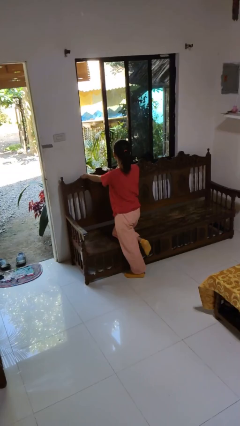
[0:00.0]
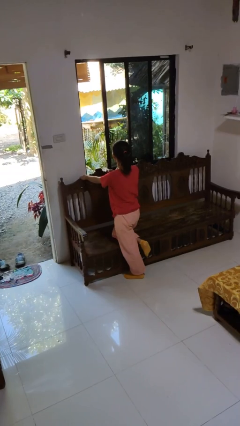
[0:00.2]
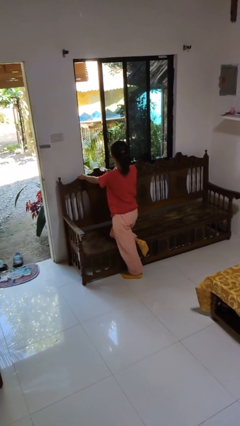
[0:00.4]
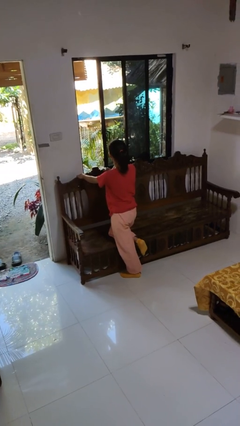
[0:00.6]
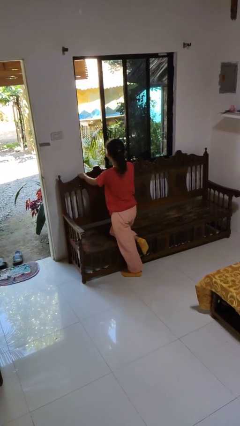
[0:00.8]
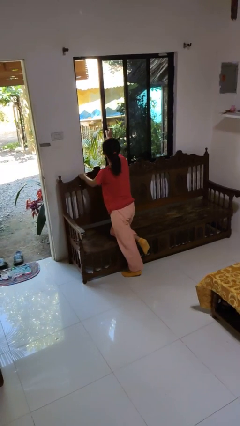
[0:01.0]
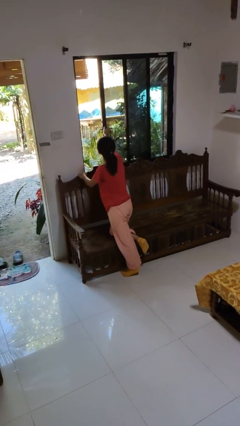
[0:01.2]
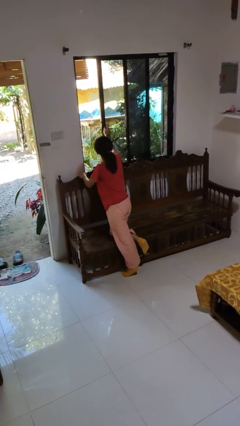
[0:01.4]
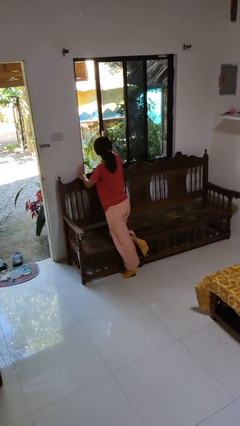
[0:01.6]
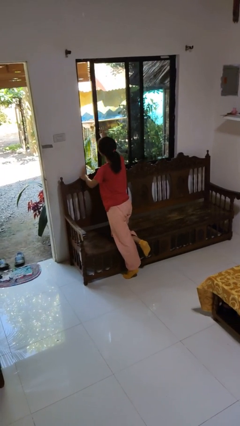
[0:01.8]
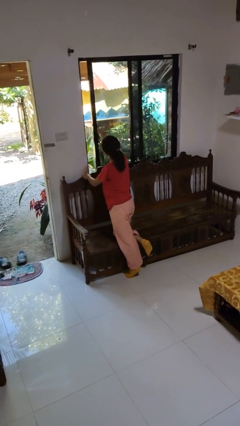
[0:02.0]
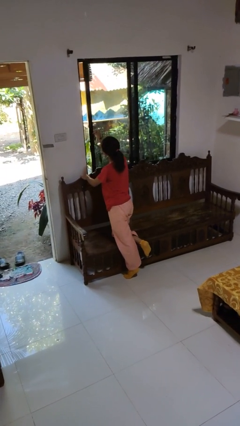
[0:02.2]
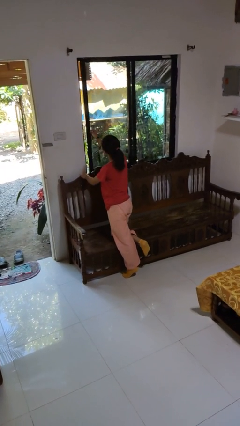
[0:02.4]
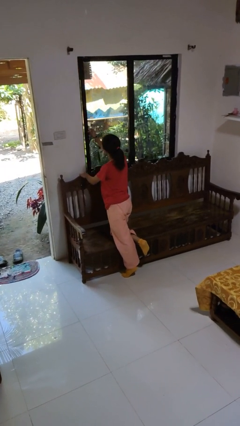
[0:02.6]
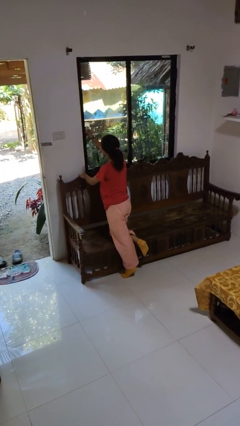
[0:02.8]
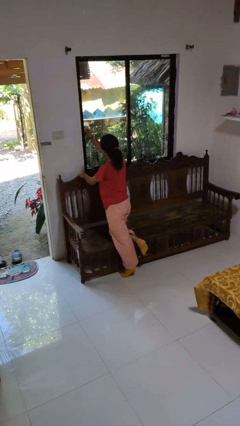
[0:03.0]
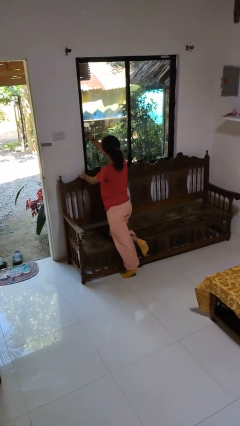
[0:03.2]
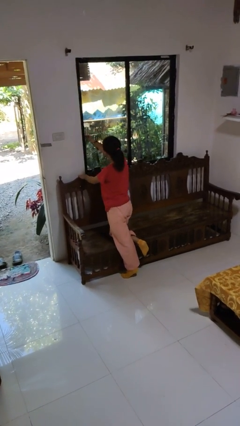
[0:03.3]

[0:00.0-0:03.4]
person closes home window

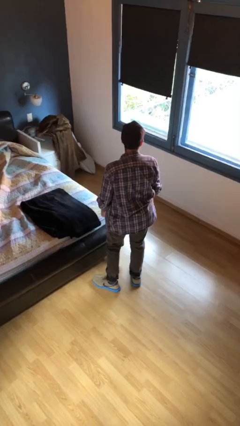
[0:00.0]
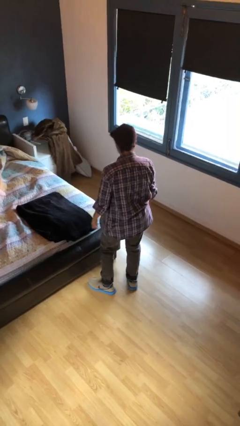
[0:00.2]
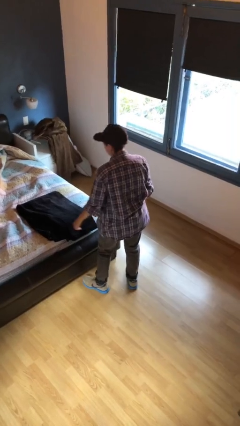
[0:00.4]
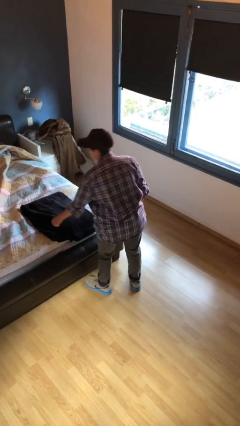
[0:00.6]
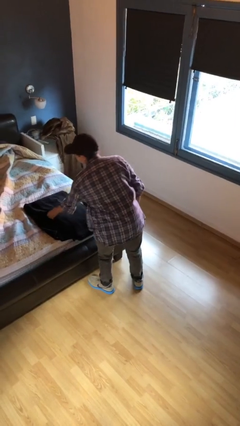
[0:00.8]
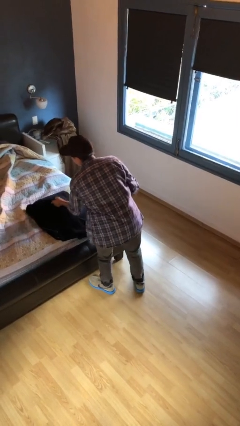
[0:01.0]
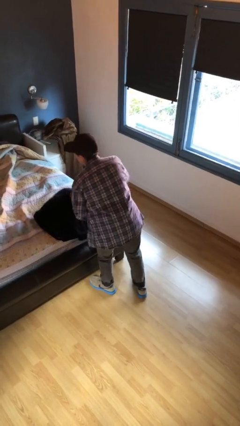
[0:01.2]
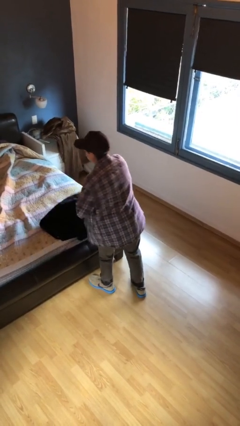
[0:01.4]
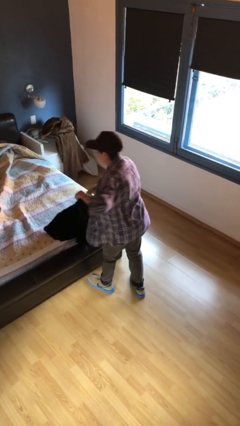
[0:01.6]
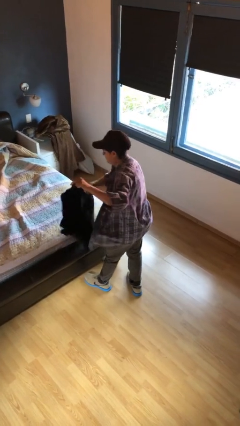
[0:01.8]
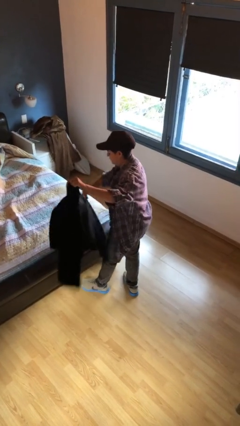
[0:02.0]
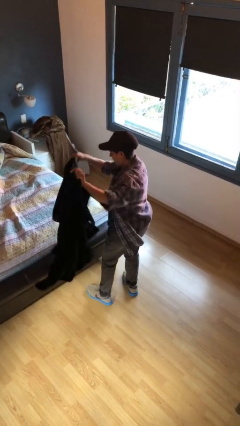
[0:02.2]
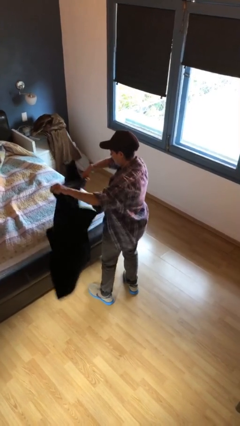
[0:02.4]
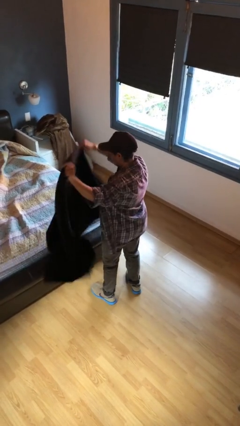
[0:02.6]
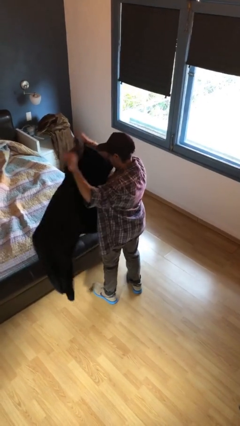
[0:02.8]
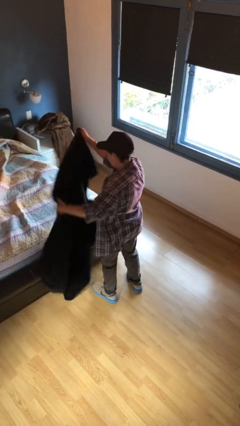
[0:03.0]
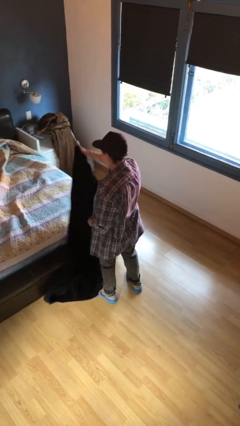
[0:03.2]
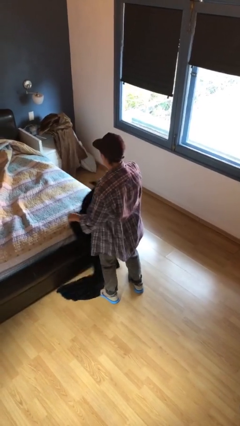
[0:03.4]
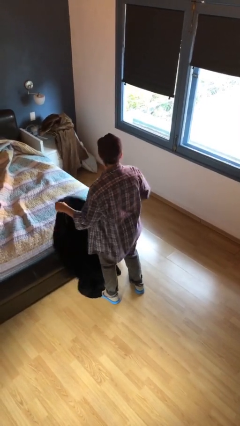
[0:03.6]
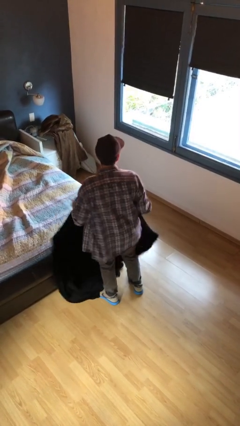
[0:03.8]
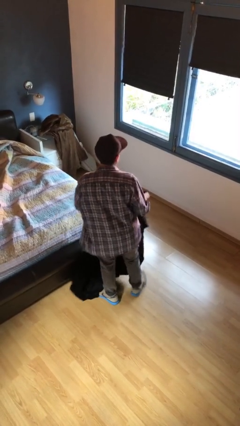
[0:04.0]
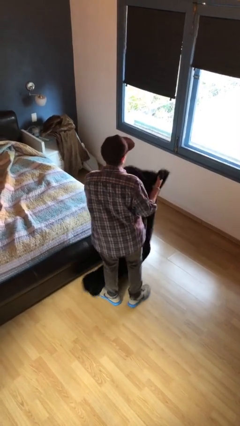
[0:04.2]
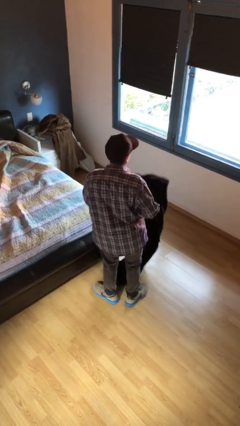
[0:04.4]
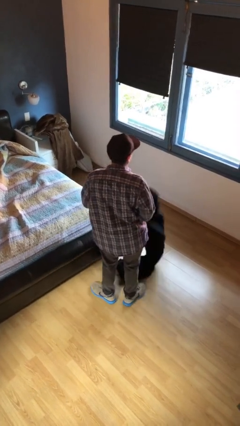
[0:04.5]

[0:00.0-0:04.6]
person unfolds blanket

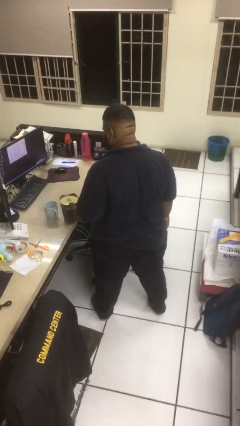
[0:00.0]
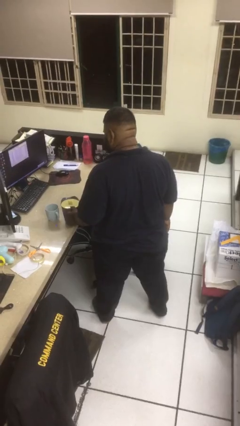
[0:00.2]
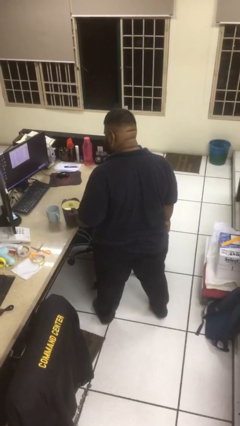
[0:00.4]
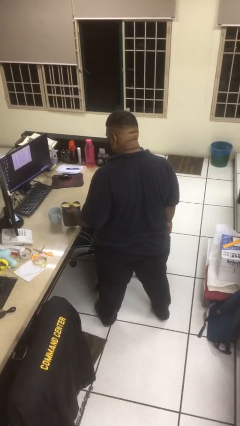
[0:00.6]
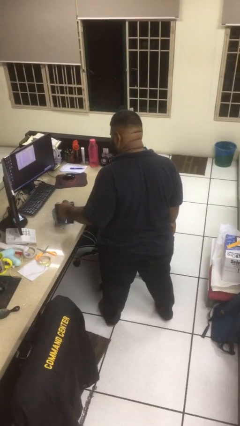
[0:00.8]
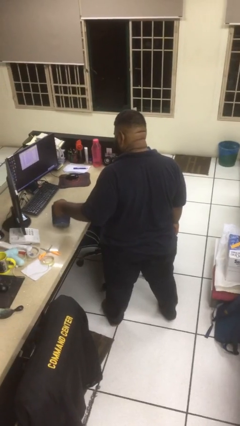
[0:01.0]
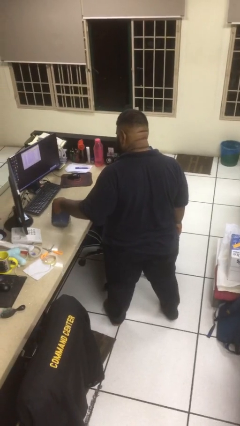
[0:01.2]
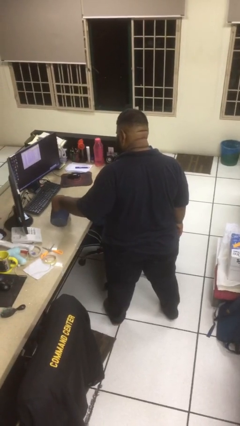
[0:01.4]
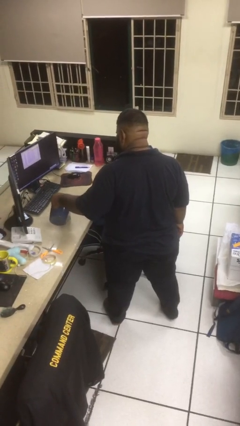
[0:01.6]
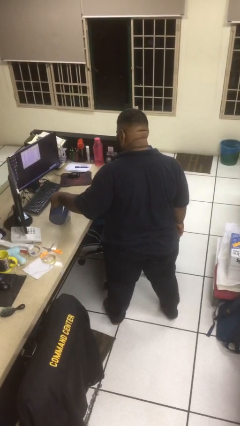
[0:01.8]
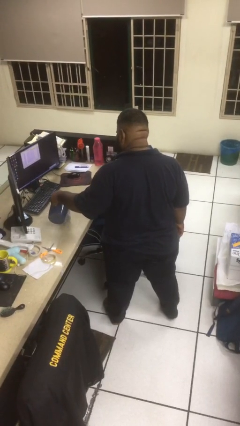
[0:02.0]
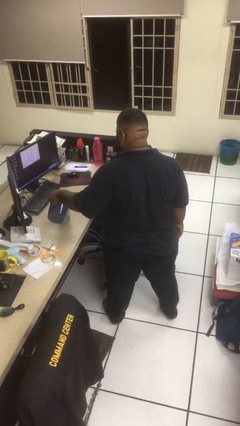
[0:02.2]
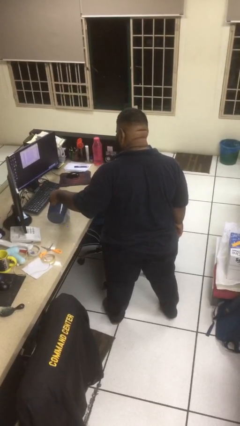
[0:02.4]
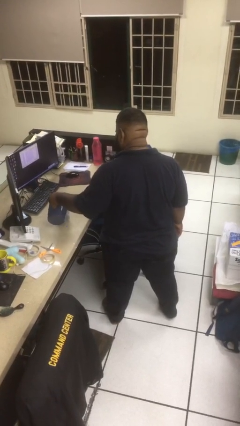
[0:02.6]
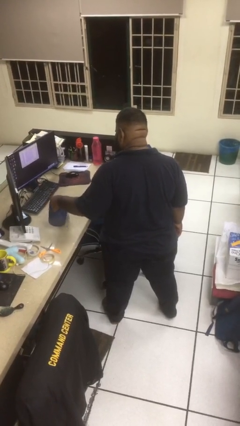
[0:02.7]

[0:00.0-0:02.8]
person pours coffee into mug

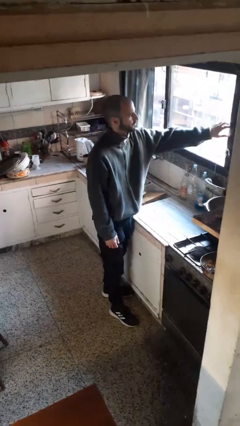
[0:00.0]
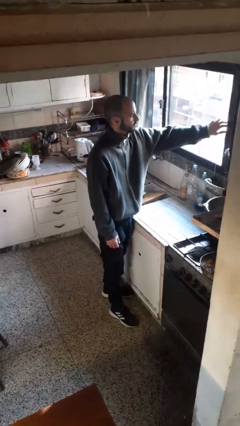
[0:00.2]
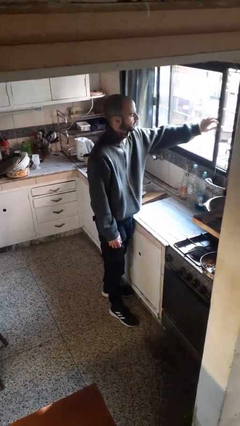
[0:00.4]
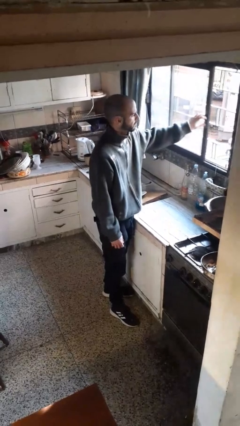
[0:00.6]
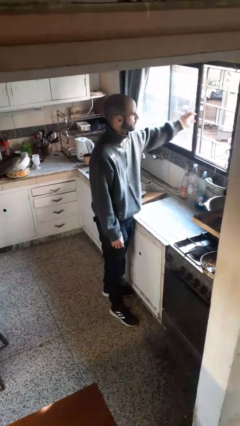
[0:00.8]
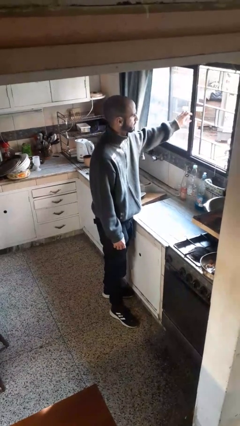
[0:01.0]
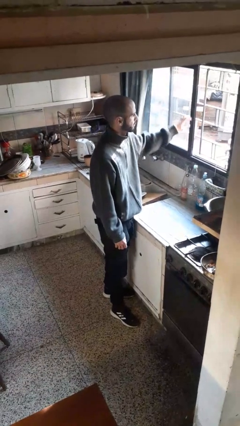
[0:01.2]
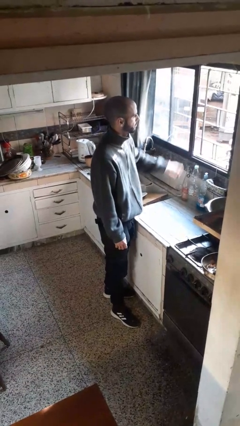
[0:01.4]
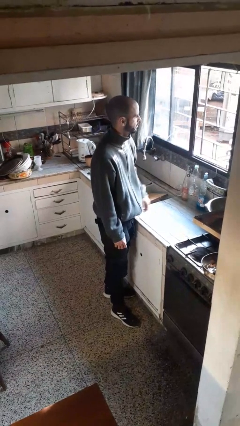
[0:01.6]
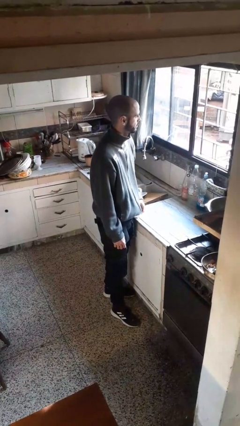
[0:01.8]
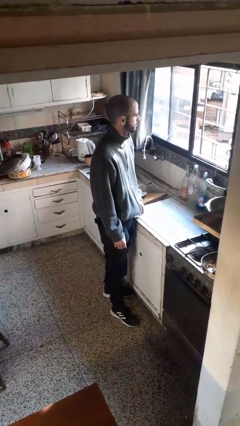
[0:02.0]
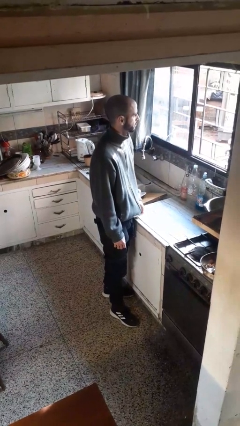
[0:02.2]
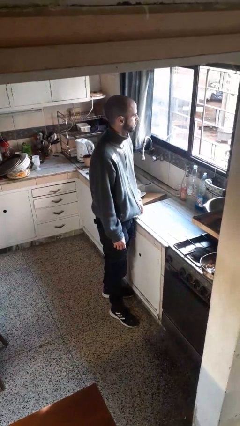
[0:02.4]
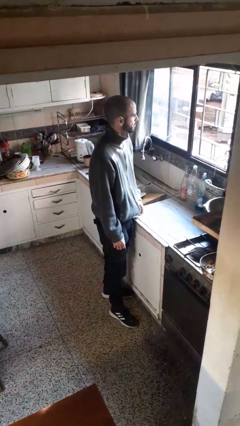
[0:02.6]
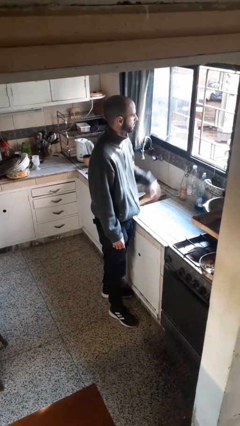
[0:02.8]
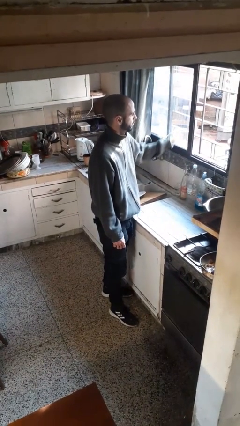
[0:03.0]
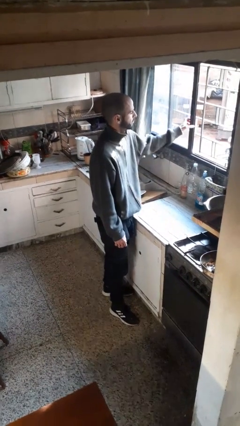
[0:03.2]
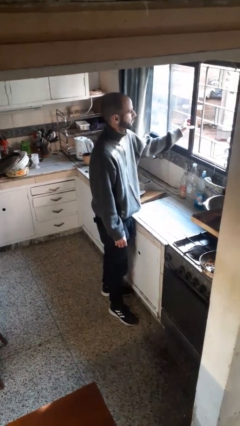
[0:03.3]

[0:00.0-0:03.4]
person opens home window

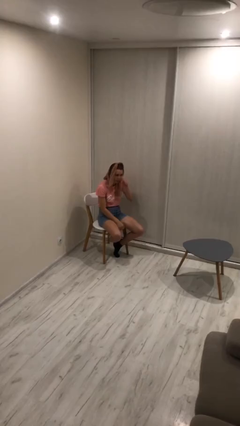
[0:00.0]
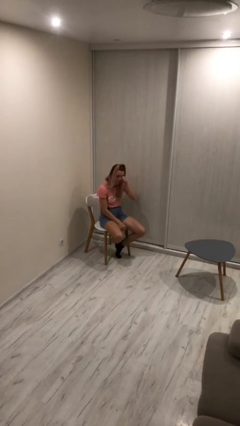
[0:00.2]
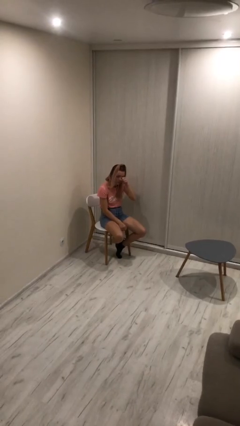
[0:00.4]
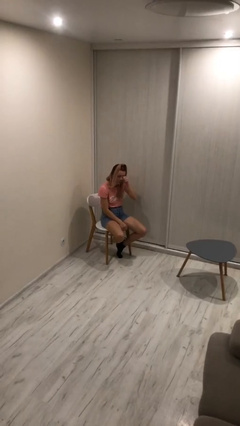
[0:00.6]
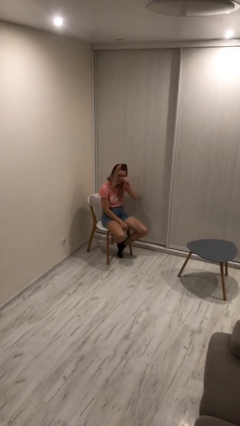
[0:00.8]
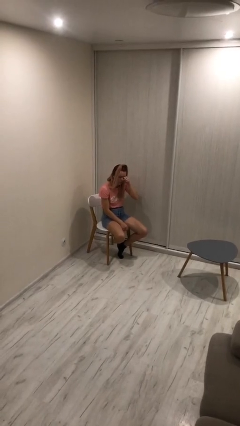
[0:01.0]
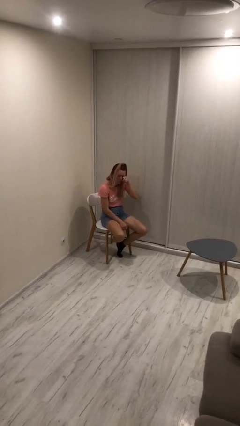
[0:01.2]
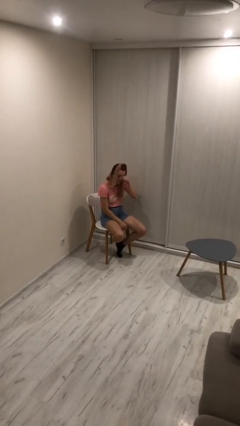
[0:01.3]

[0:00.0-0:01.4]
person rubs eyes

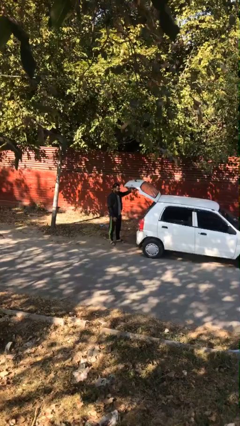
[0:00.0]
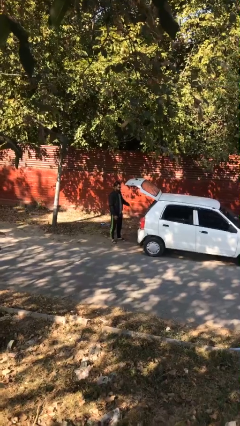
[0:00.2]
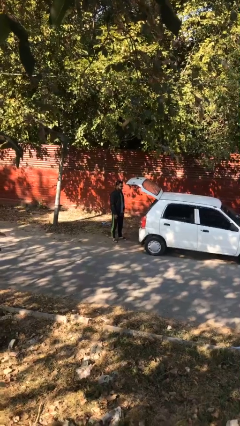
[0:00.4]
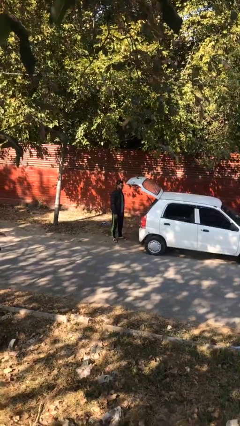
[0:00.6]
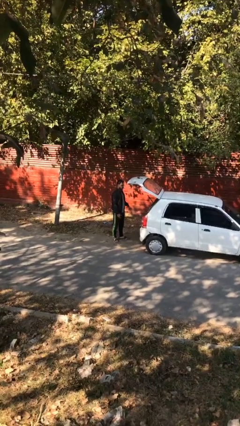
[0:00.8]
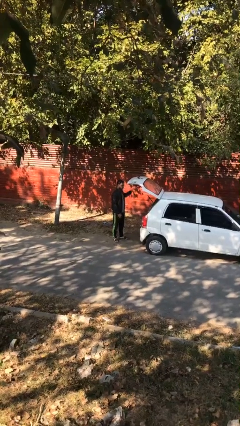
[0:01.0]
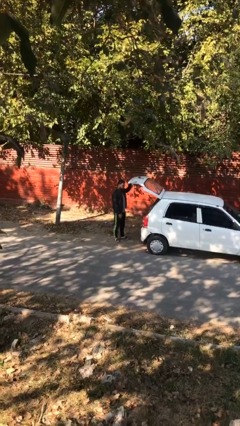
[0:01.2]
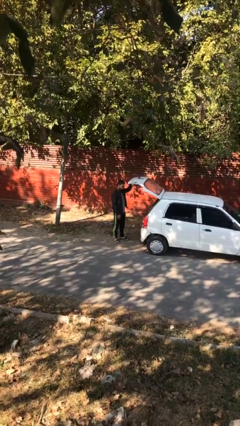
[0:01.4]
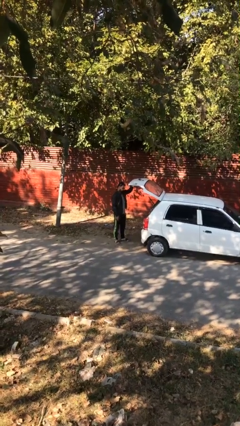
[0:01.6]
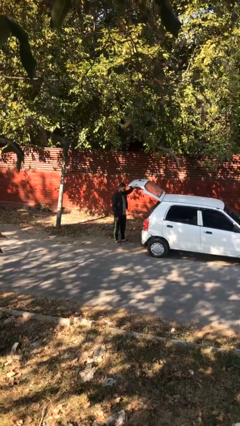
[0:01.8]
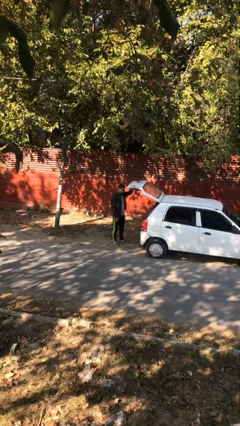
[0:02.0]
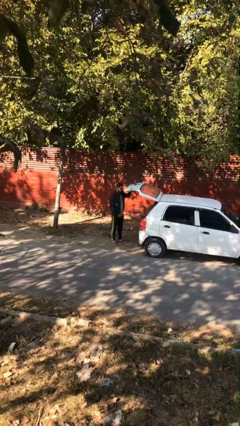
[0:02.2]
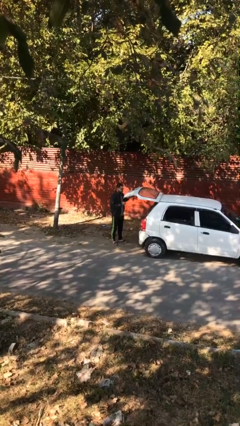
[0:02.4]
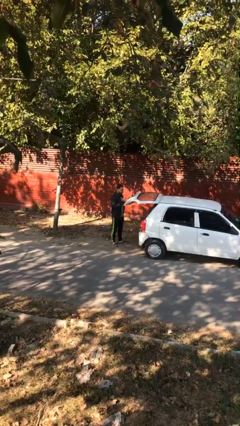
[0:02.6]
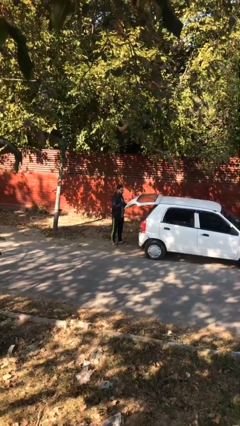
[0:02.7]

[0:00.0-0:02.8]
person closes car trunk
